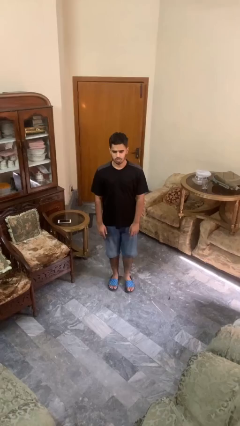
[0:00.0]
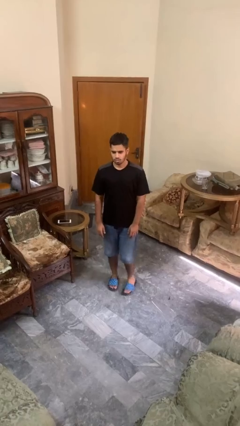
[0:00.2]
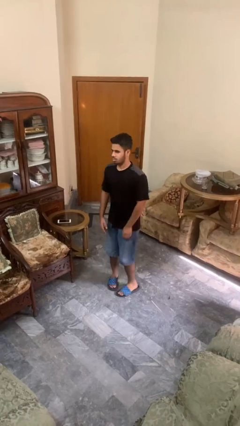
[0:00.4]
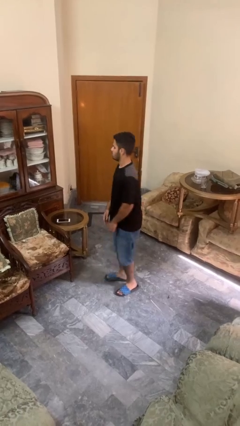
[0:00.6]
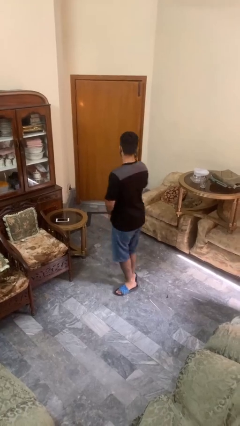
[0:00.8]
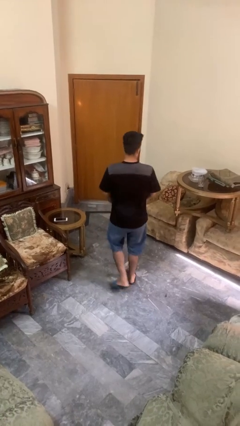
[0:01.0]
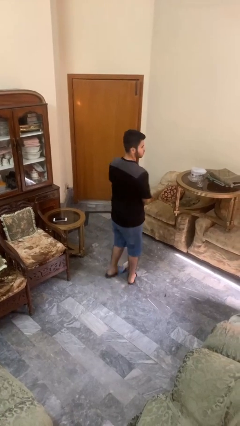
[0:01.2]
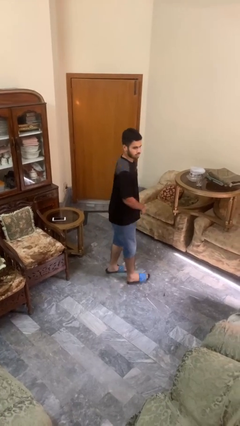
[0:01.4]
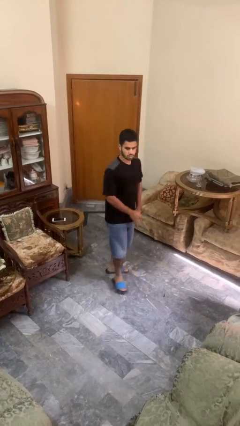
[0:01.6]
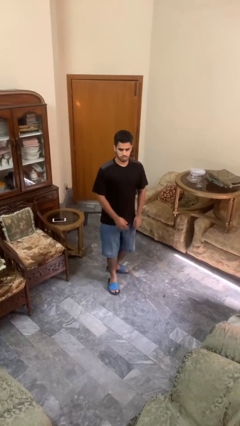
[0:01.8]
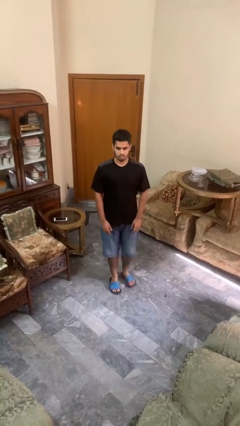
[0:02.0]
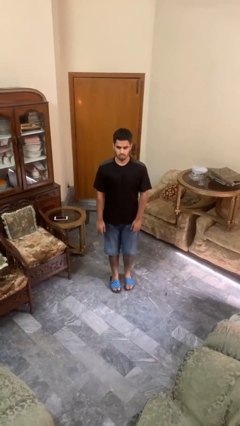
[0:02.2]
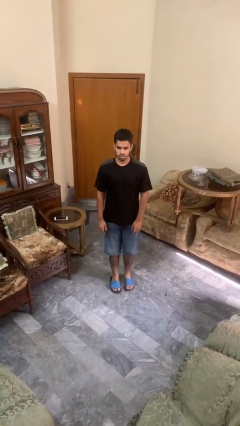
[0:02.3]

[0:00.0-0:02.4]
person twirls

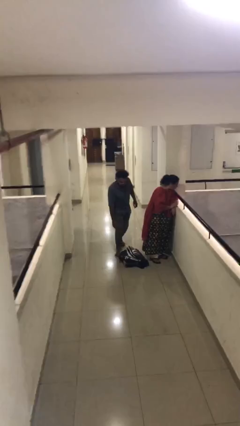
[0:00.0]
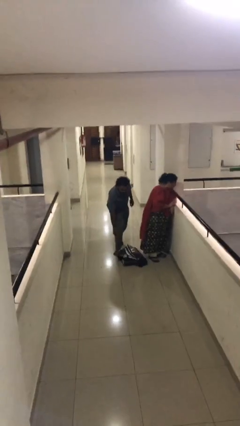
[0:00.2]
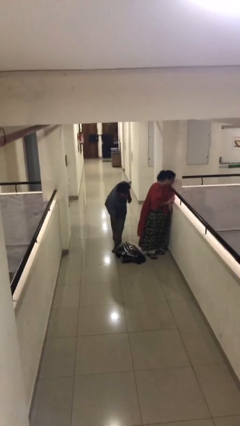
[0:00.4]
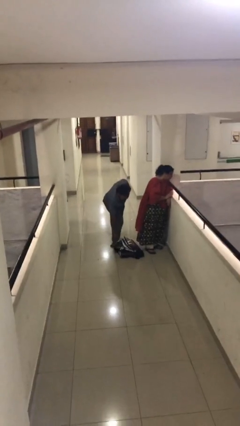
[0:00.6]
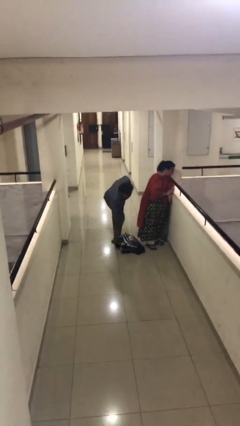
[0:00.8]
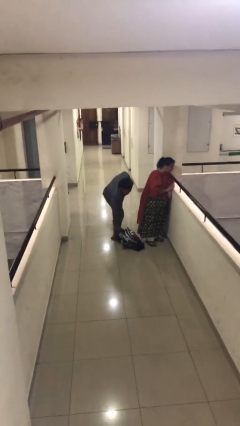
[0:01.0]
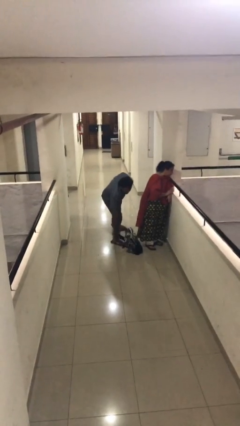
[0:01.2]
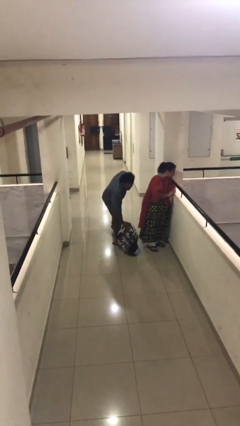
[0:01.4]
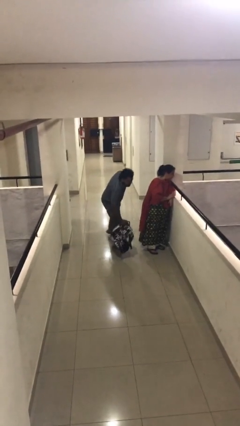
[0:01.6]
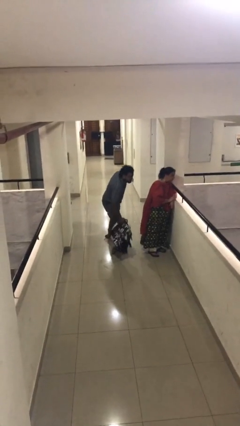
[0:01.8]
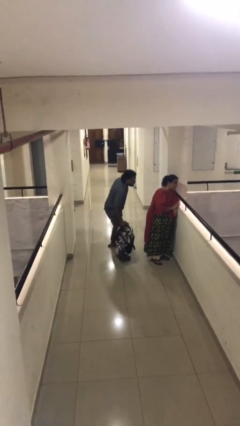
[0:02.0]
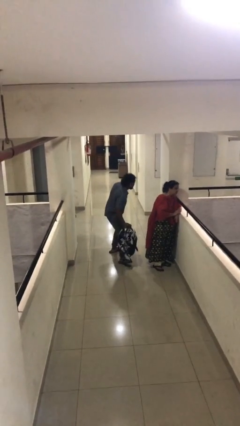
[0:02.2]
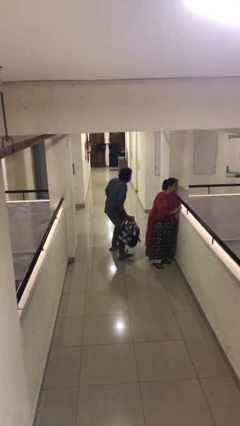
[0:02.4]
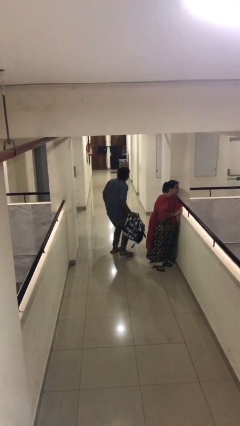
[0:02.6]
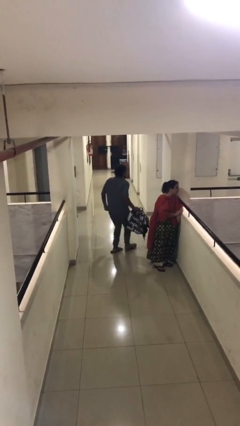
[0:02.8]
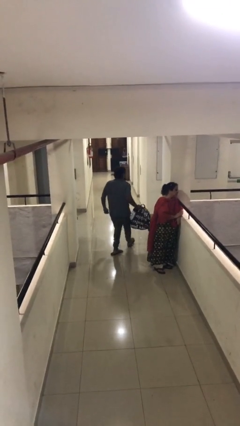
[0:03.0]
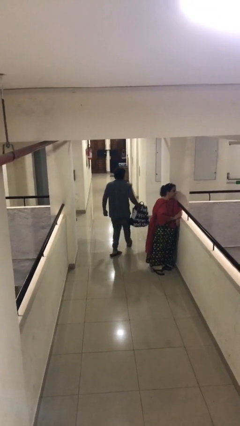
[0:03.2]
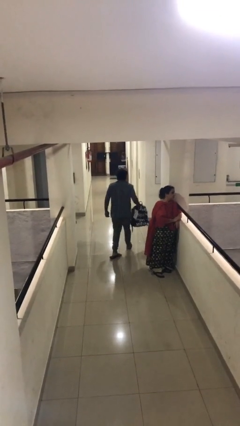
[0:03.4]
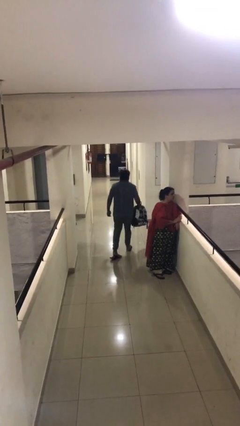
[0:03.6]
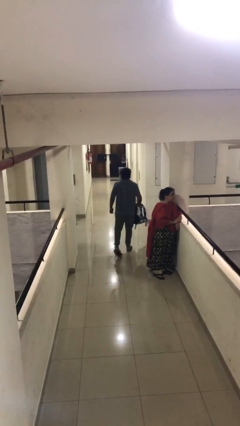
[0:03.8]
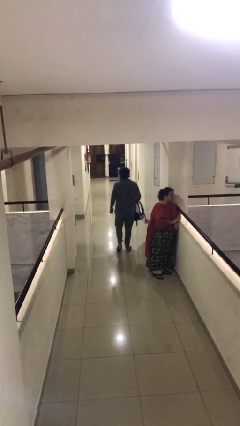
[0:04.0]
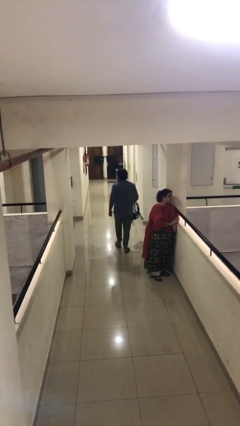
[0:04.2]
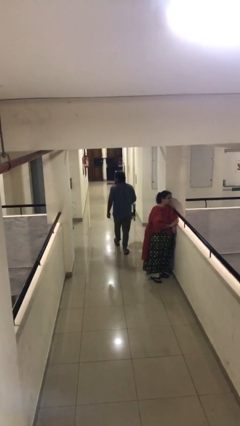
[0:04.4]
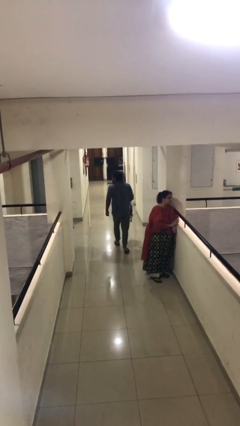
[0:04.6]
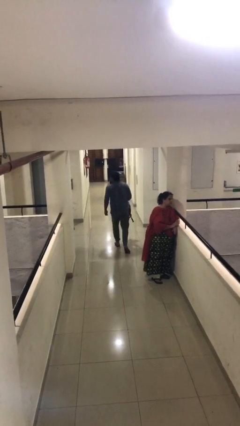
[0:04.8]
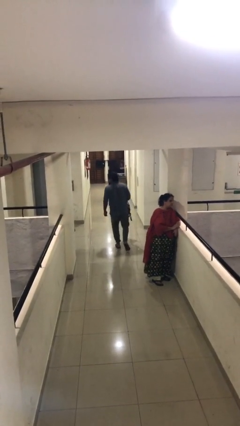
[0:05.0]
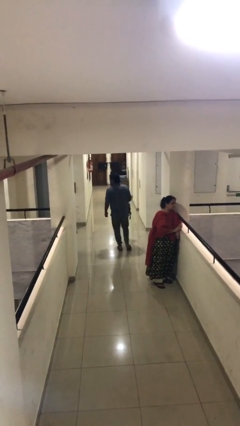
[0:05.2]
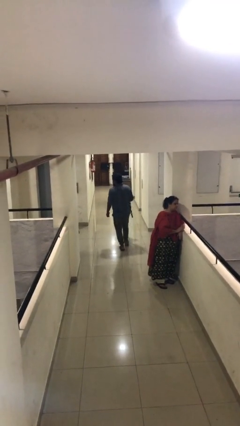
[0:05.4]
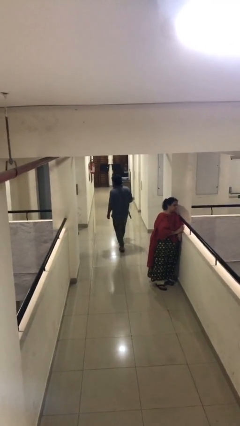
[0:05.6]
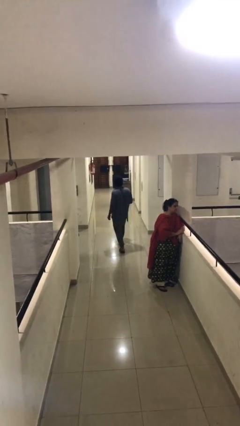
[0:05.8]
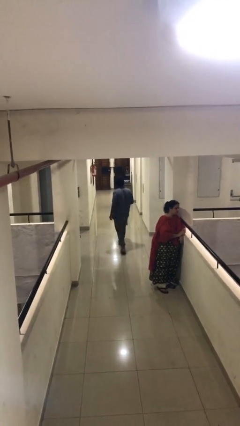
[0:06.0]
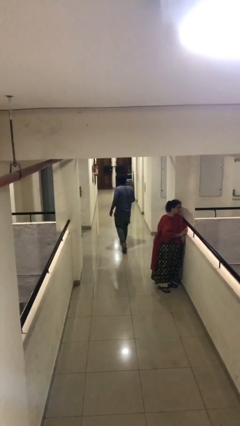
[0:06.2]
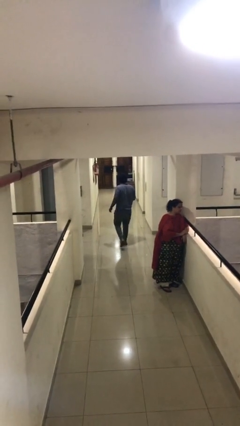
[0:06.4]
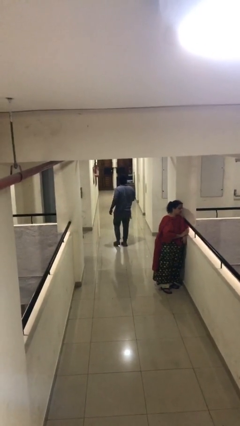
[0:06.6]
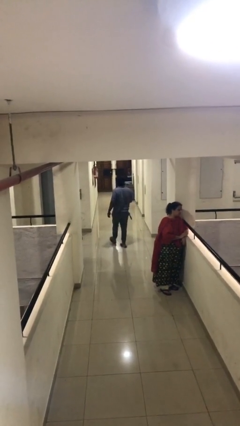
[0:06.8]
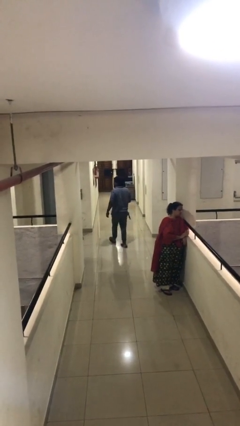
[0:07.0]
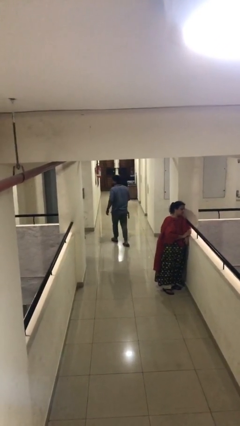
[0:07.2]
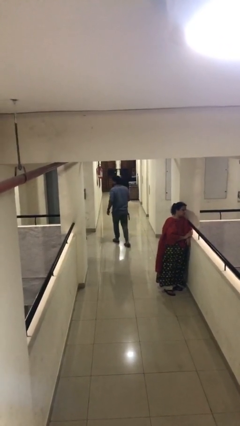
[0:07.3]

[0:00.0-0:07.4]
person steals object from person

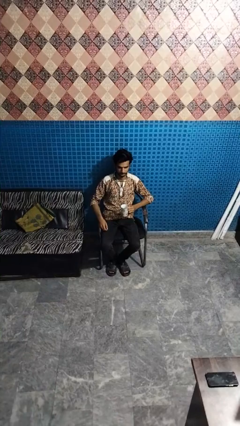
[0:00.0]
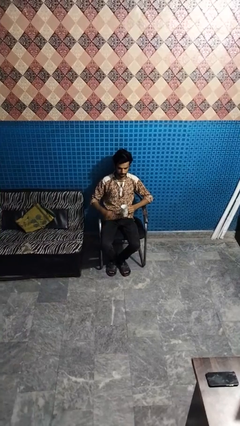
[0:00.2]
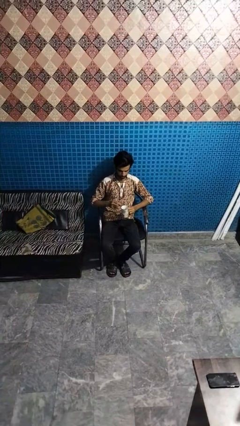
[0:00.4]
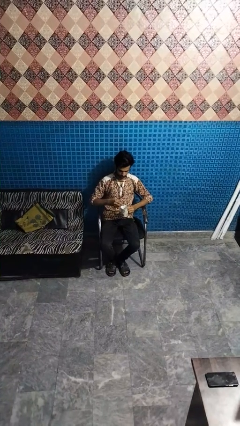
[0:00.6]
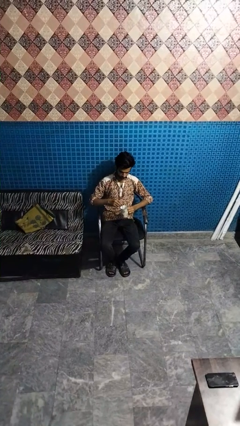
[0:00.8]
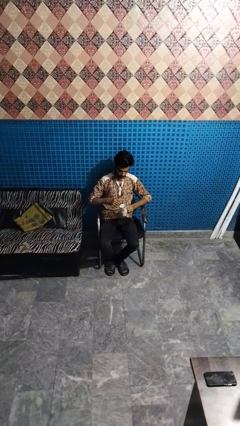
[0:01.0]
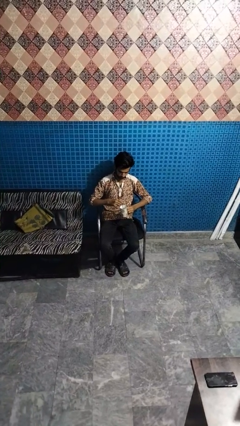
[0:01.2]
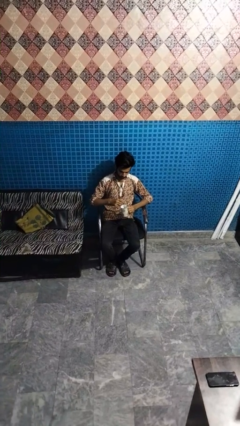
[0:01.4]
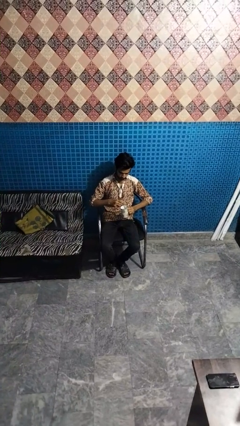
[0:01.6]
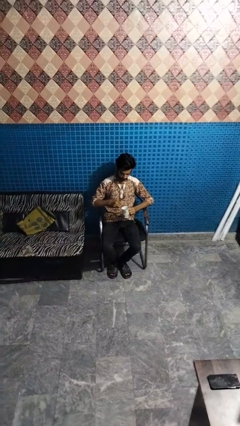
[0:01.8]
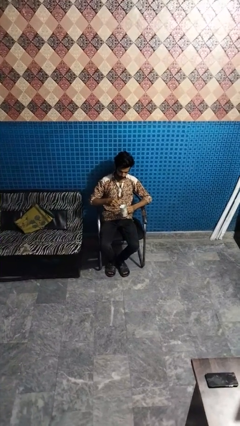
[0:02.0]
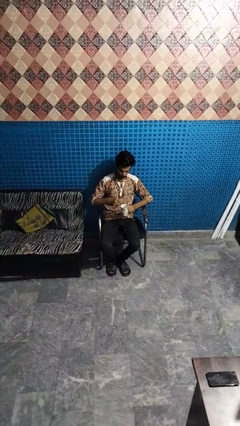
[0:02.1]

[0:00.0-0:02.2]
person stirs mug

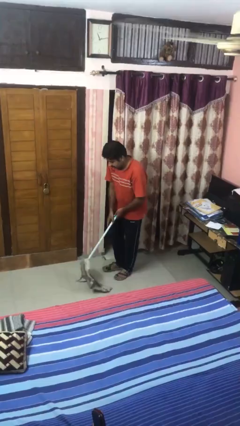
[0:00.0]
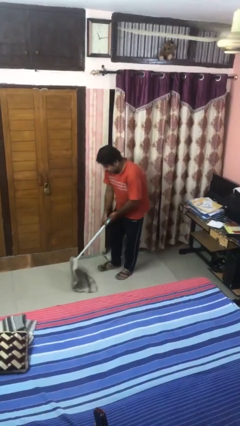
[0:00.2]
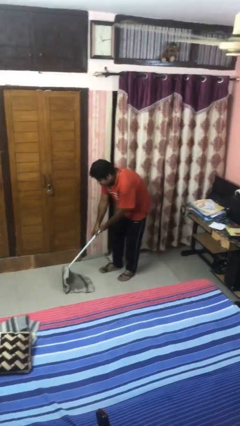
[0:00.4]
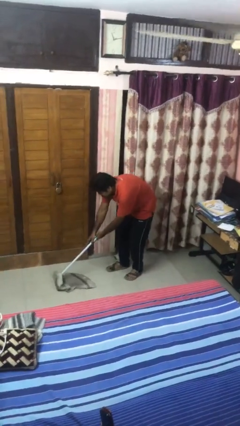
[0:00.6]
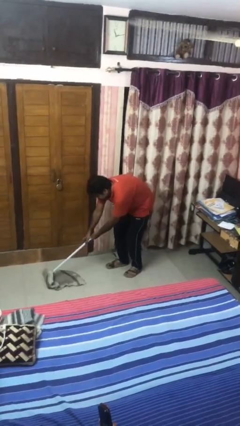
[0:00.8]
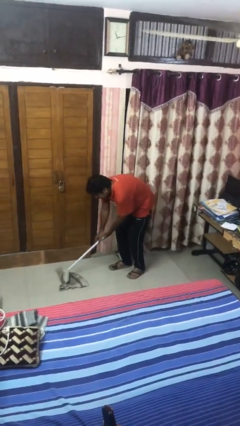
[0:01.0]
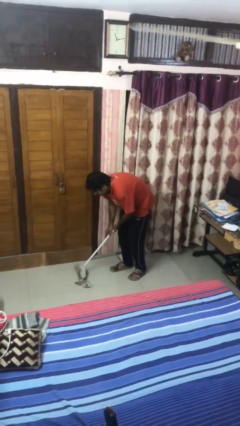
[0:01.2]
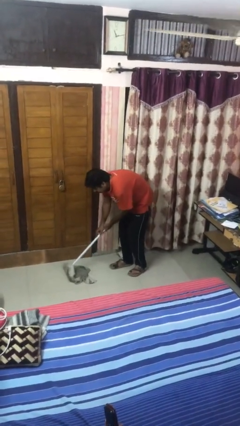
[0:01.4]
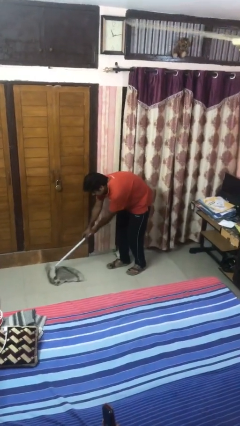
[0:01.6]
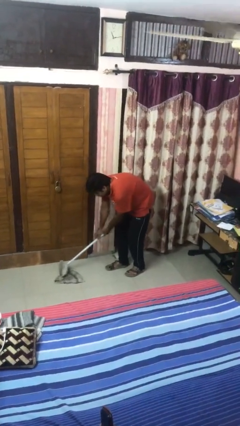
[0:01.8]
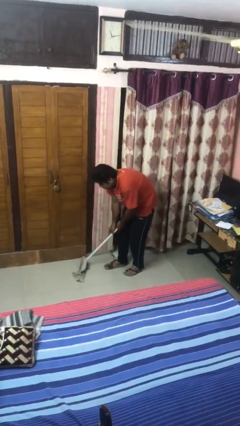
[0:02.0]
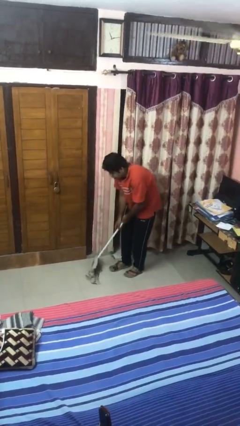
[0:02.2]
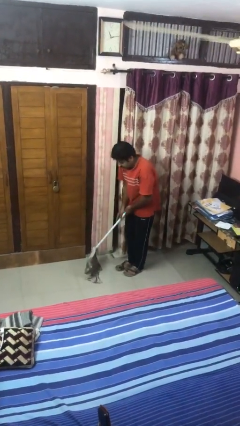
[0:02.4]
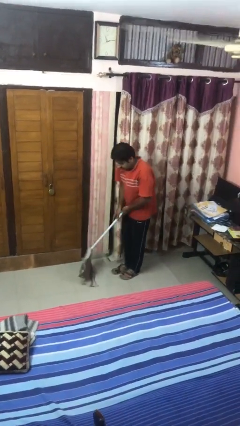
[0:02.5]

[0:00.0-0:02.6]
person mops

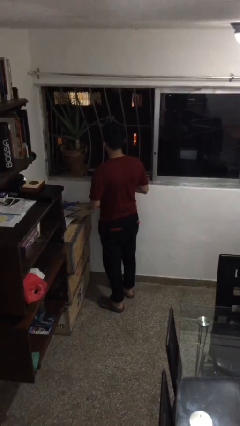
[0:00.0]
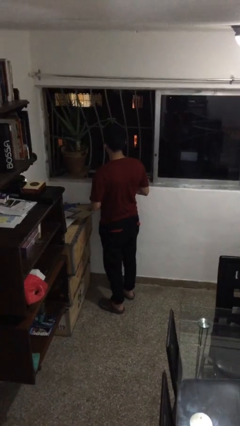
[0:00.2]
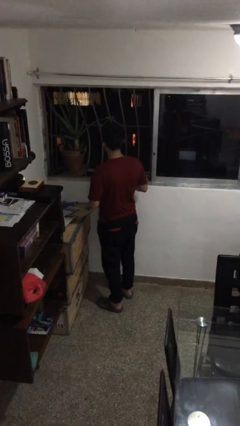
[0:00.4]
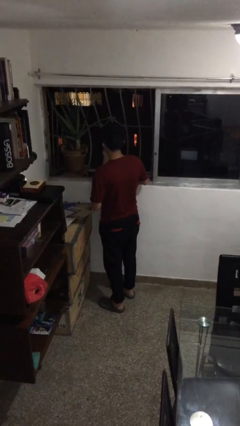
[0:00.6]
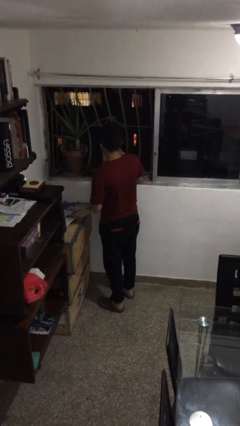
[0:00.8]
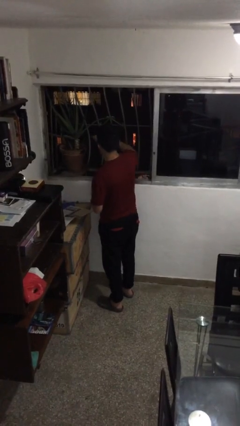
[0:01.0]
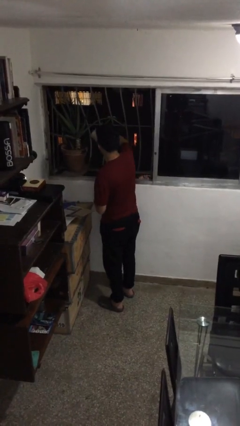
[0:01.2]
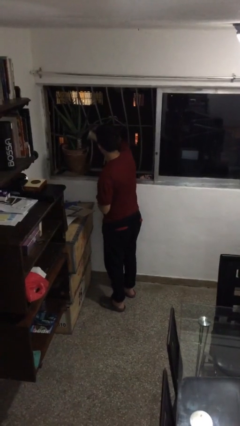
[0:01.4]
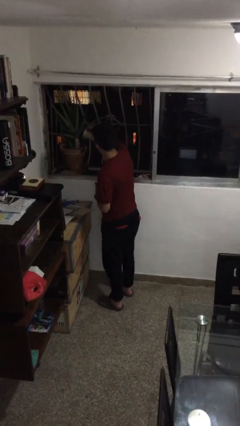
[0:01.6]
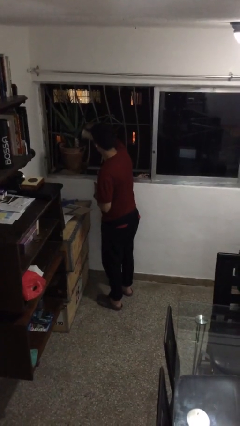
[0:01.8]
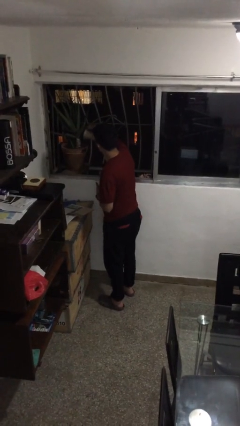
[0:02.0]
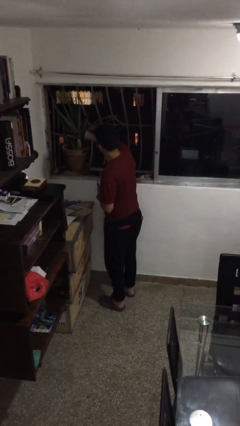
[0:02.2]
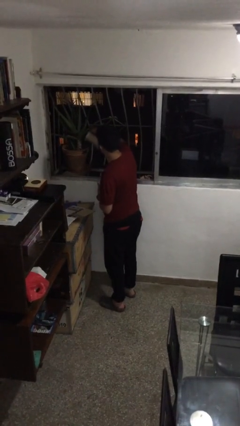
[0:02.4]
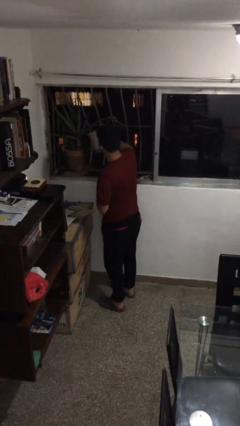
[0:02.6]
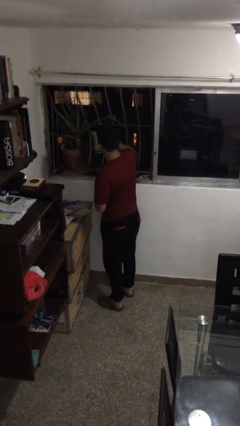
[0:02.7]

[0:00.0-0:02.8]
person waters houseplant
